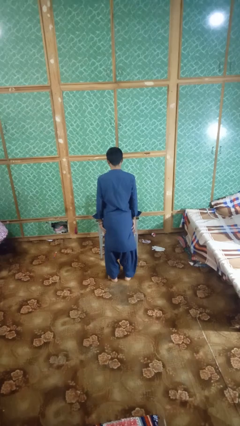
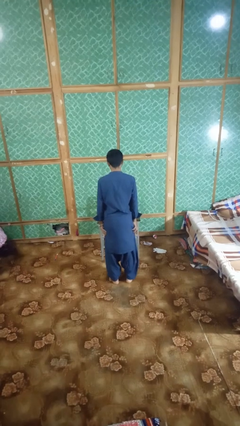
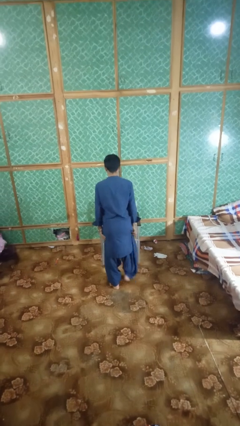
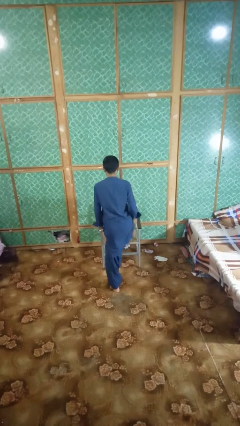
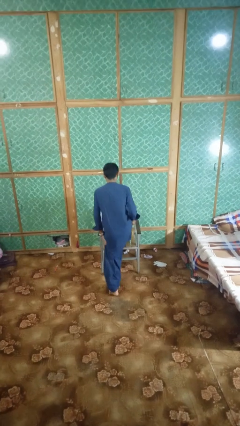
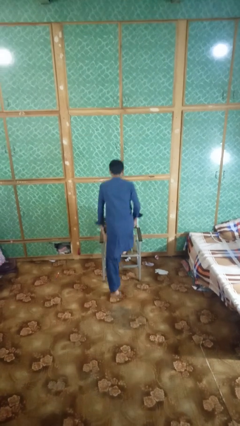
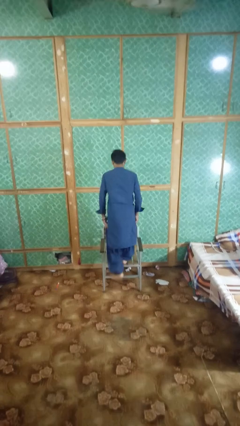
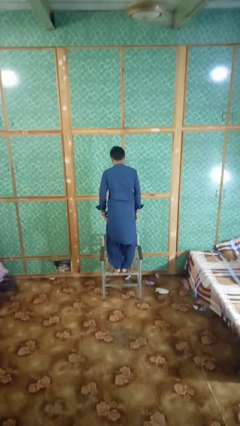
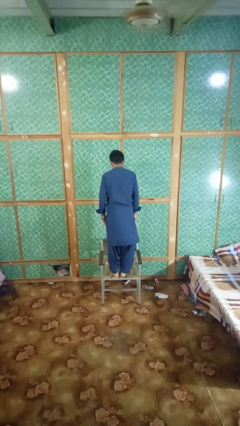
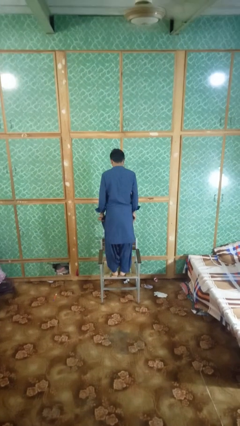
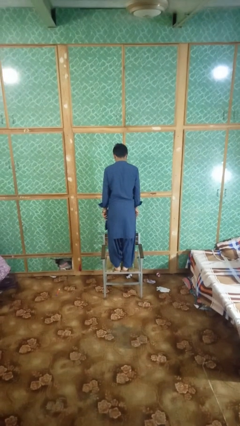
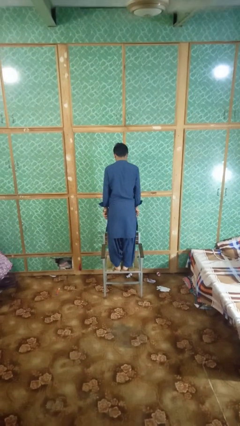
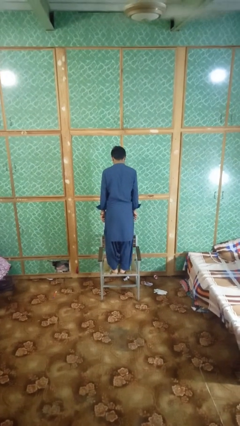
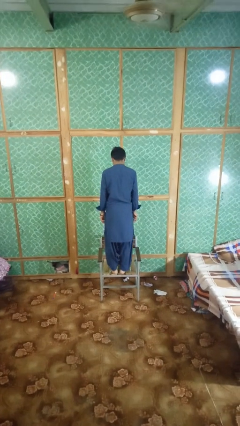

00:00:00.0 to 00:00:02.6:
person climbs on chair

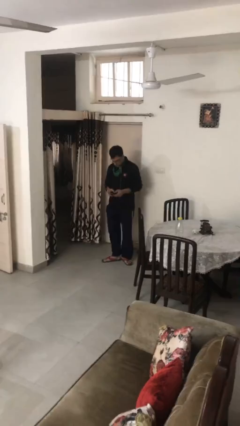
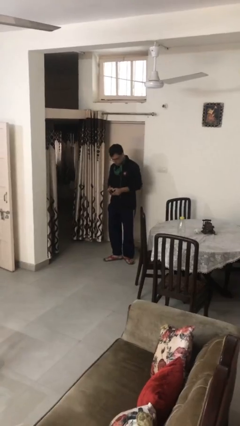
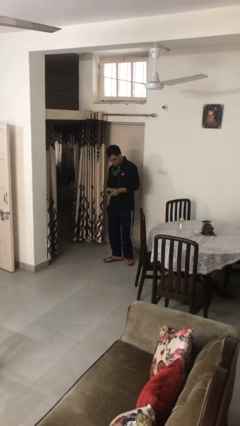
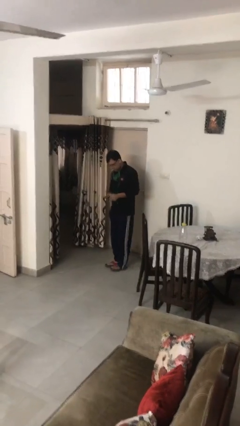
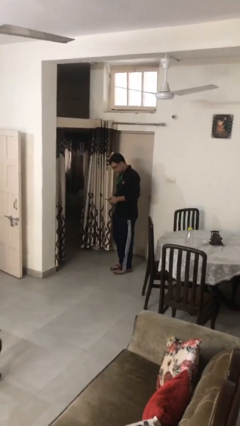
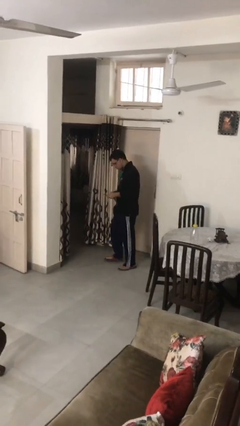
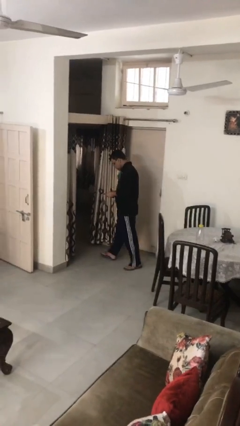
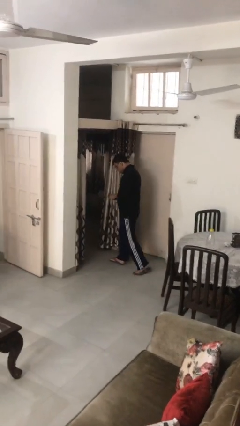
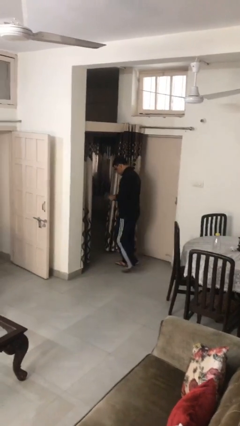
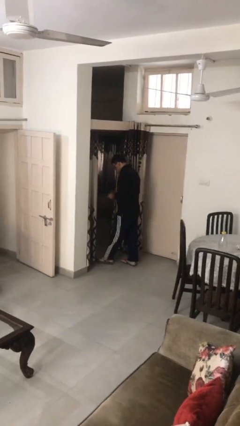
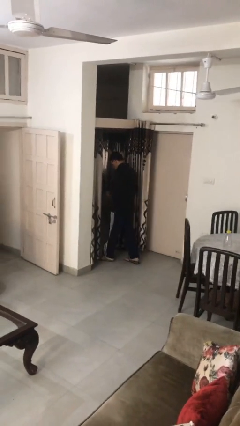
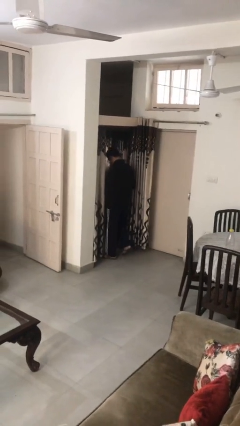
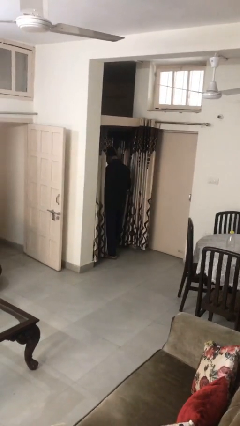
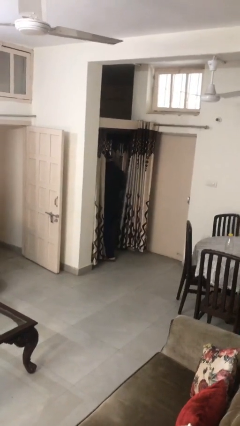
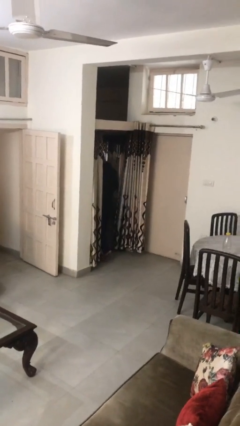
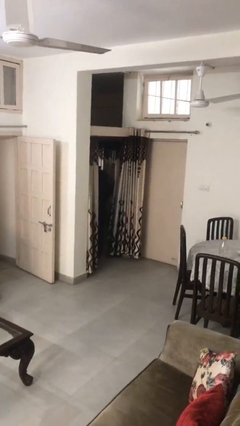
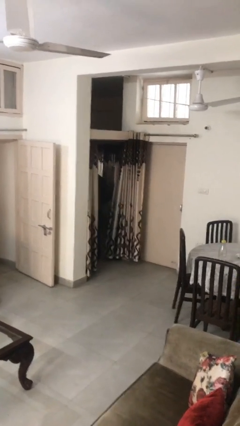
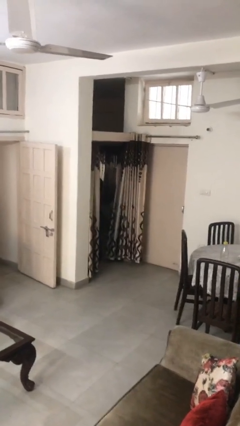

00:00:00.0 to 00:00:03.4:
person exits scene through structure

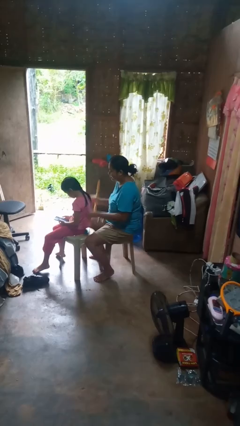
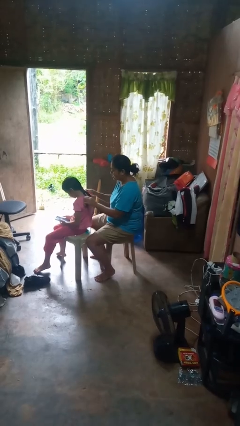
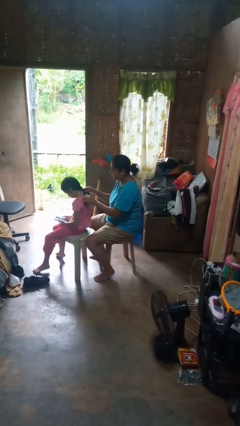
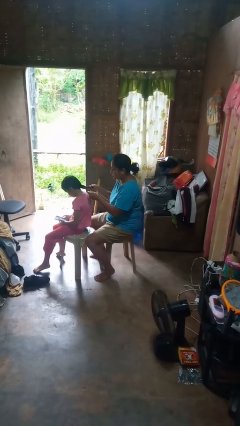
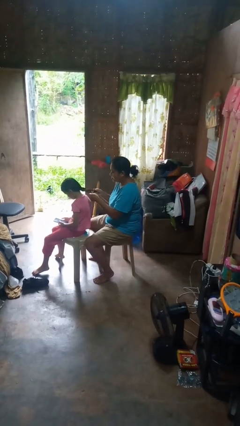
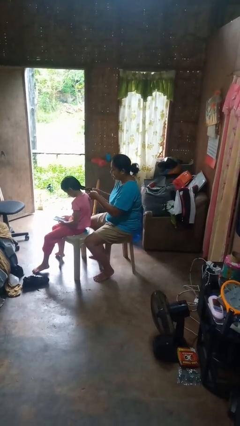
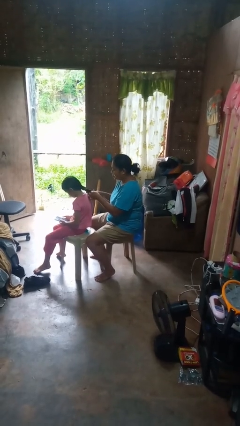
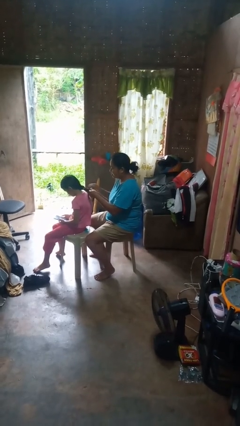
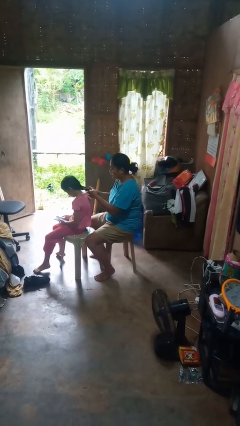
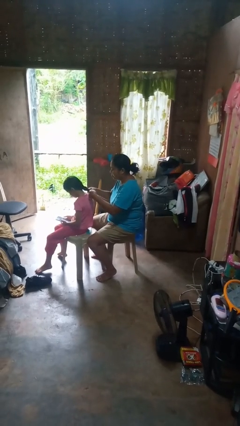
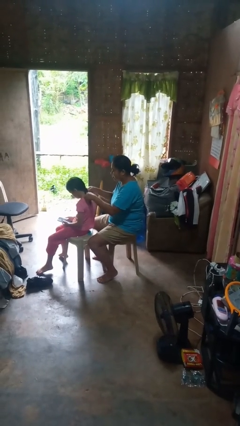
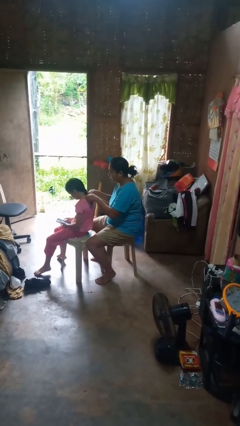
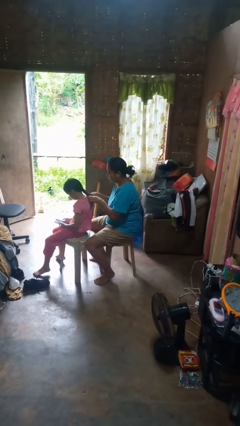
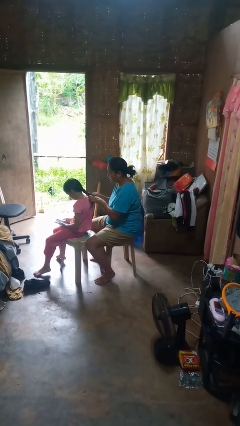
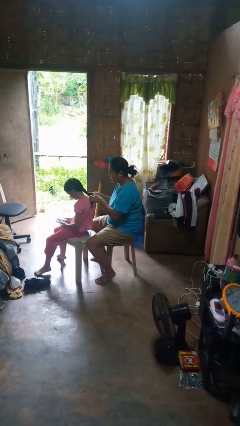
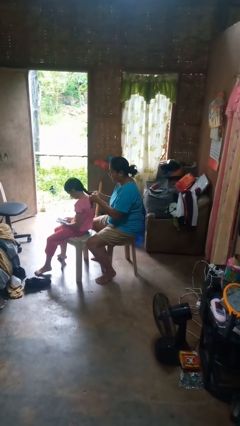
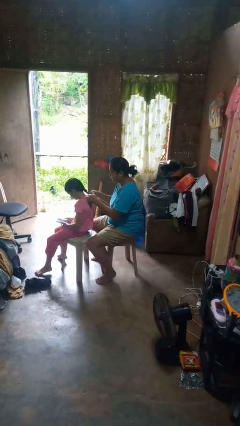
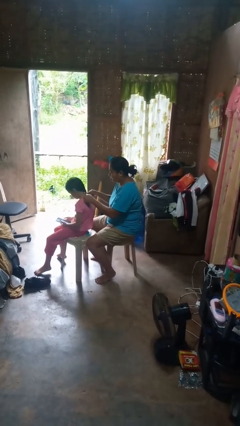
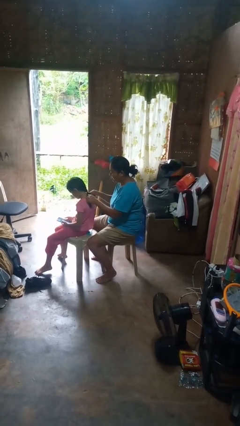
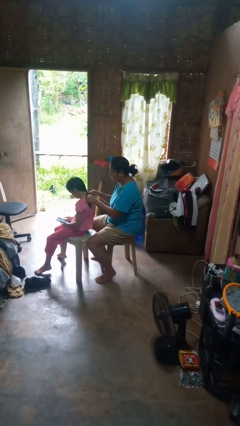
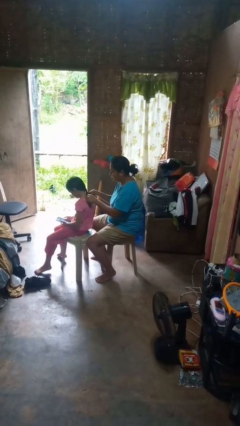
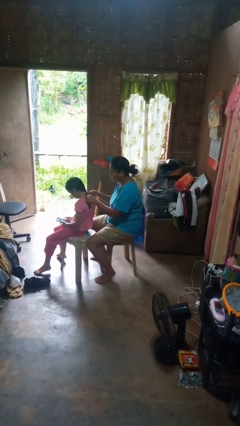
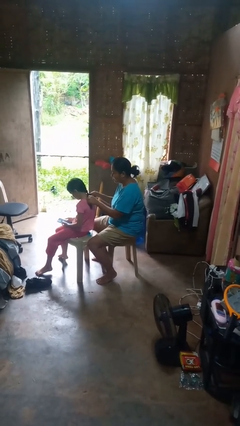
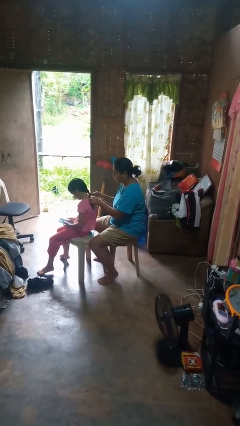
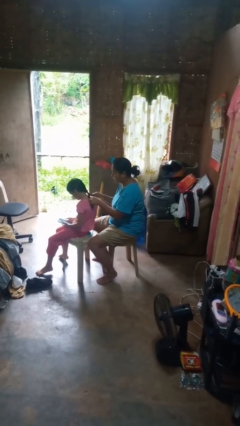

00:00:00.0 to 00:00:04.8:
person braids hair of person

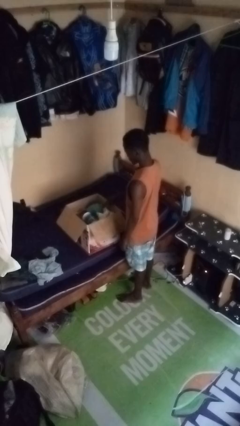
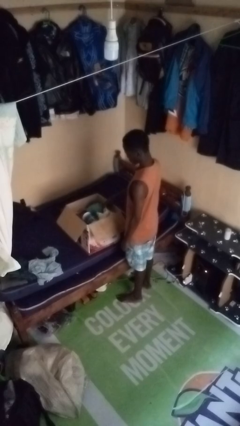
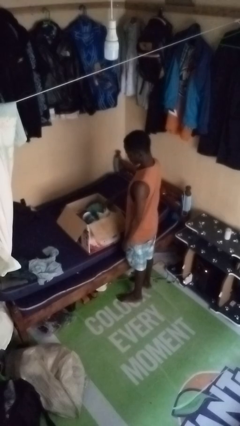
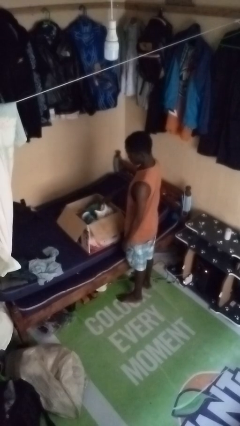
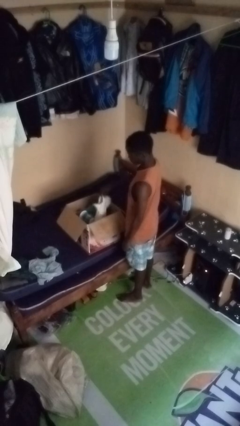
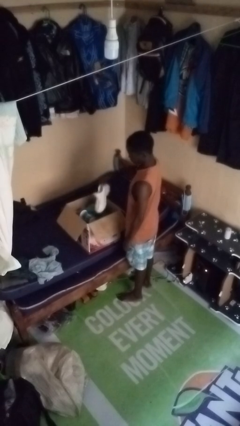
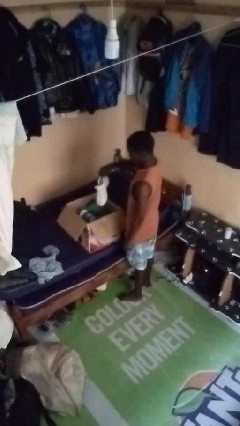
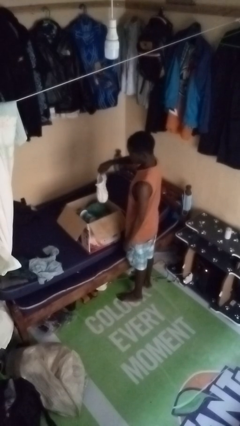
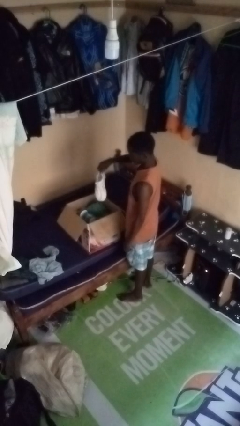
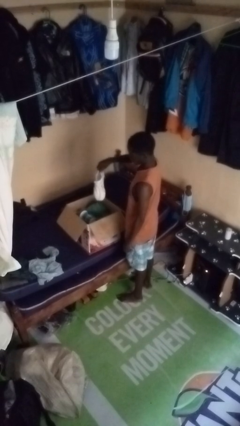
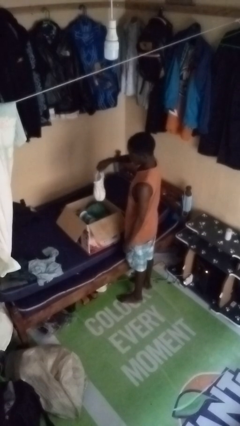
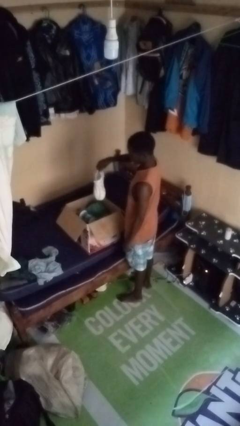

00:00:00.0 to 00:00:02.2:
person takes object from box

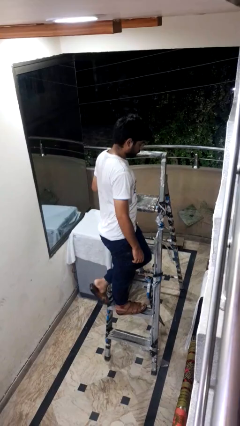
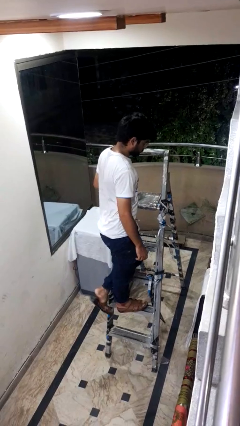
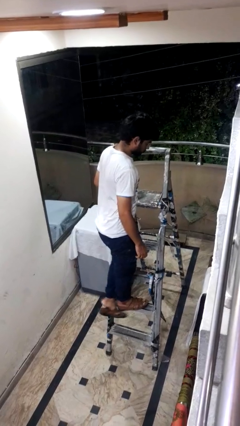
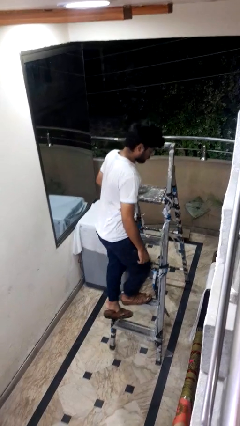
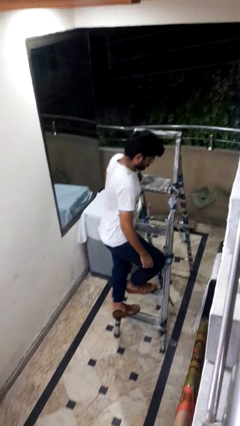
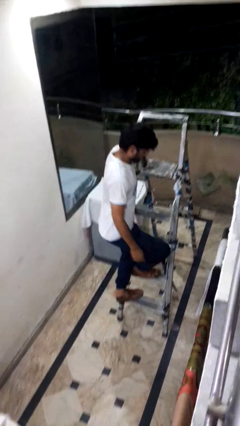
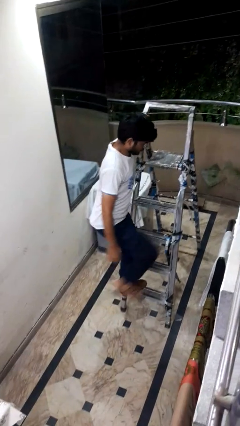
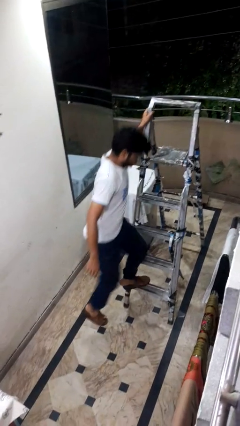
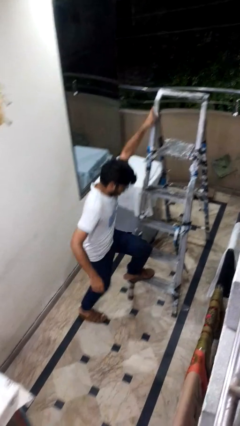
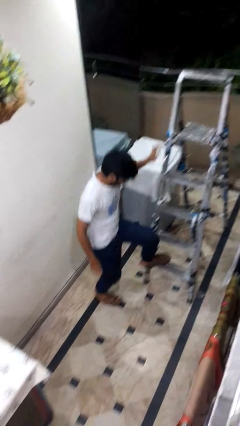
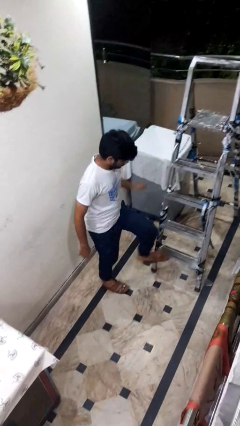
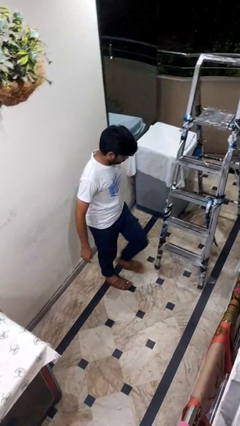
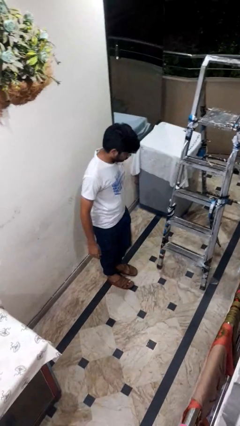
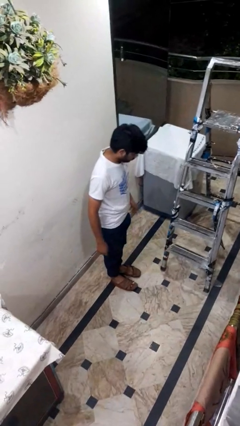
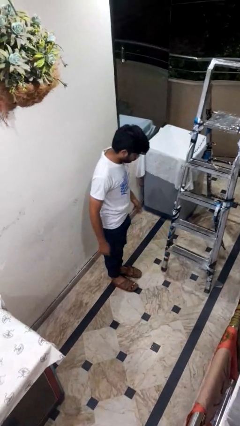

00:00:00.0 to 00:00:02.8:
person climbs down ladder

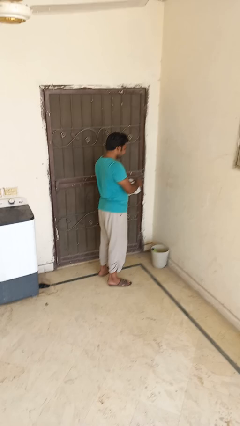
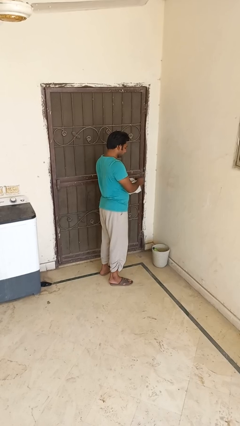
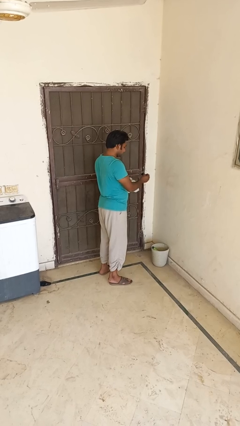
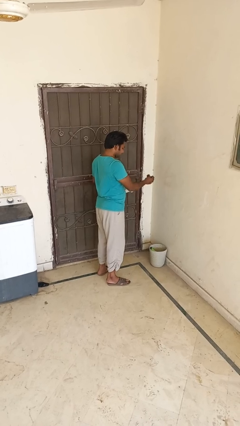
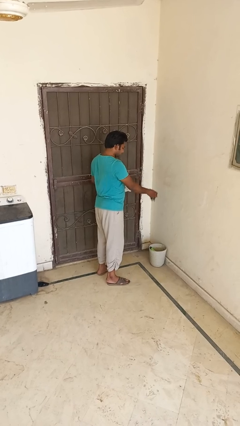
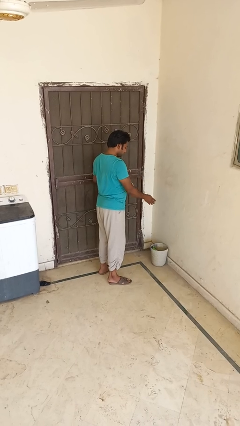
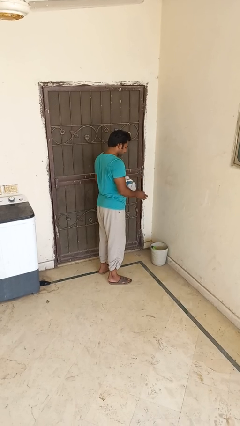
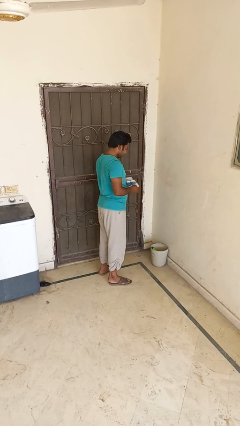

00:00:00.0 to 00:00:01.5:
person discards trash

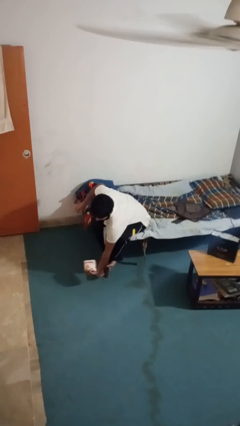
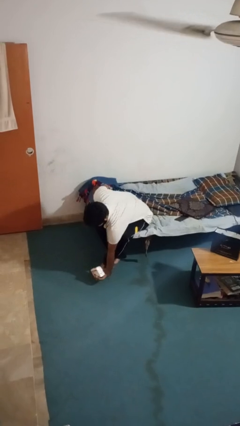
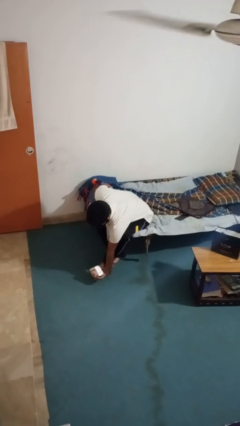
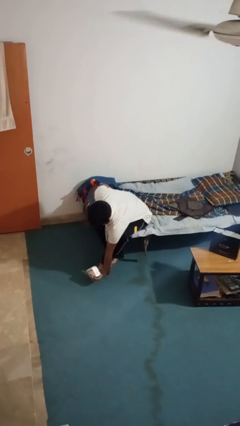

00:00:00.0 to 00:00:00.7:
person catches dropped object
